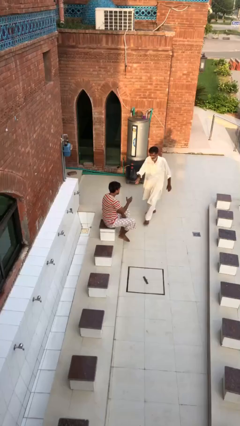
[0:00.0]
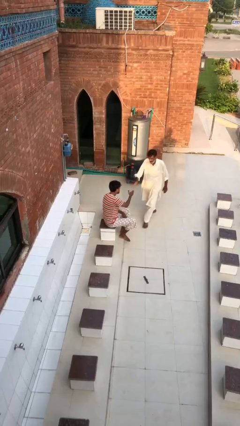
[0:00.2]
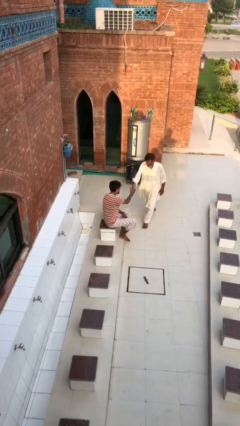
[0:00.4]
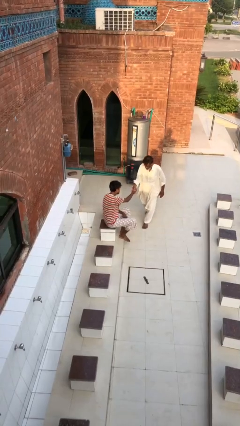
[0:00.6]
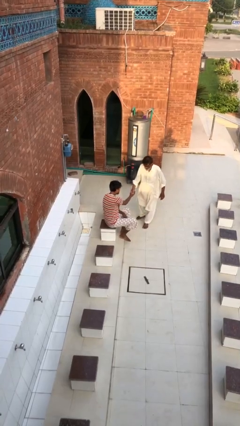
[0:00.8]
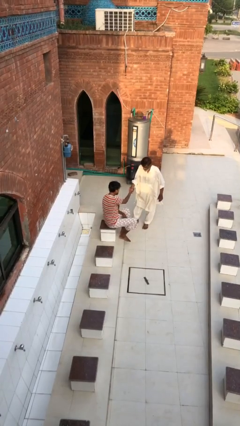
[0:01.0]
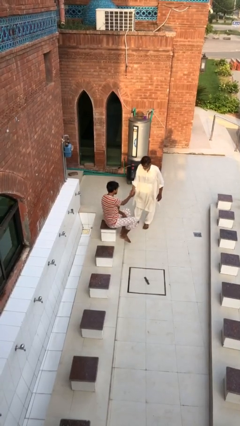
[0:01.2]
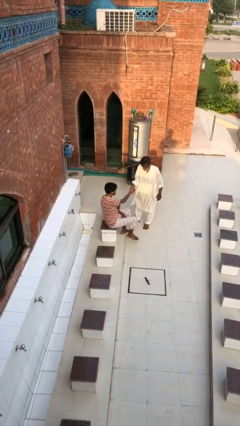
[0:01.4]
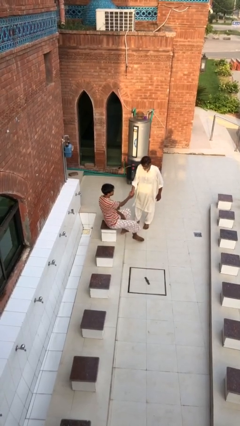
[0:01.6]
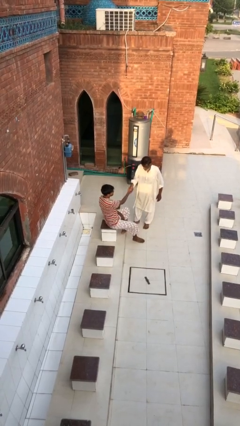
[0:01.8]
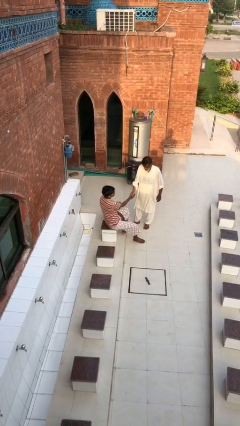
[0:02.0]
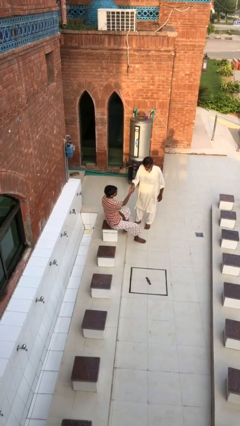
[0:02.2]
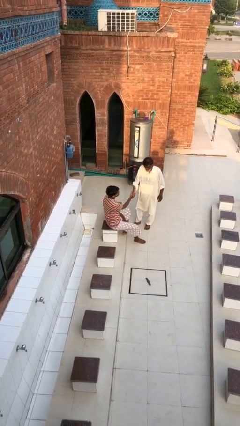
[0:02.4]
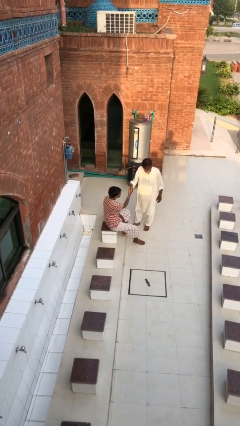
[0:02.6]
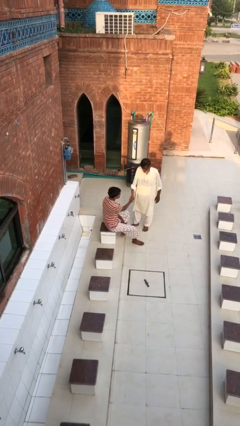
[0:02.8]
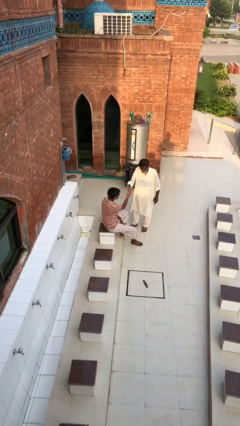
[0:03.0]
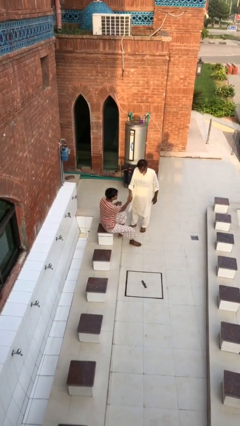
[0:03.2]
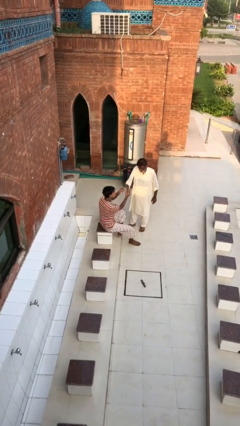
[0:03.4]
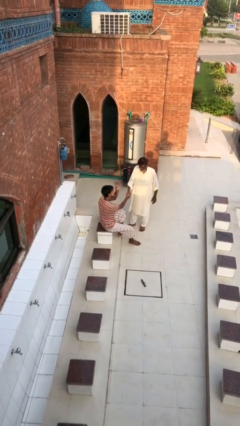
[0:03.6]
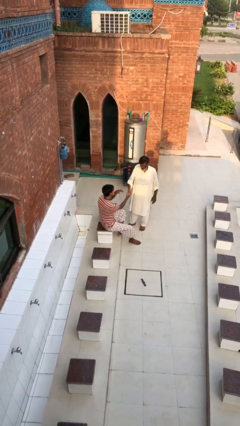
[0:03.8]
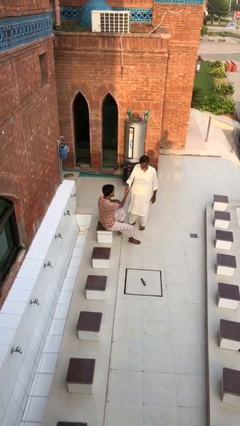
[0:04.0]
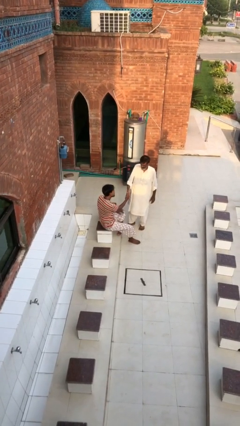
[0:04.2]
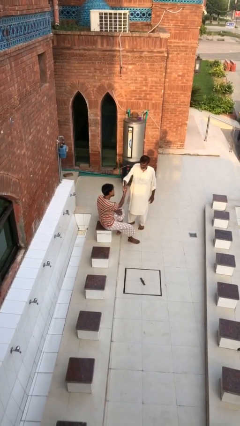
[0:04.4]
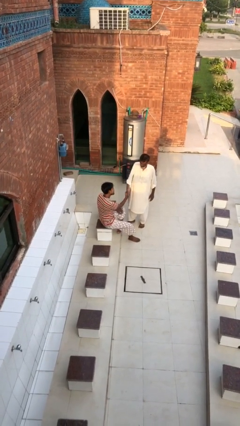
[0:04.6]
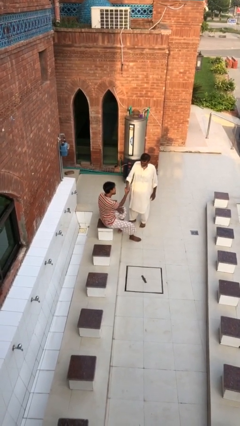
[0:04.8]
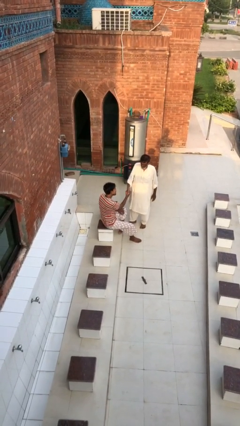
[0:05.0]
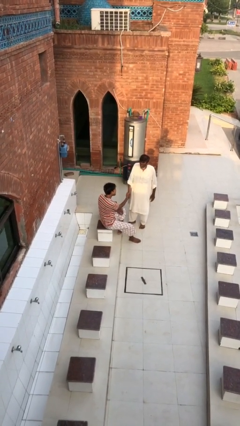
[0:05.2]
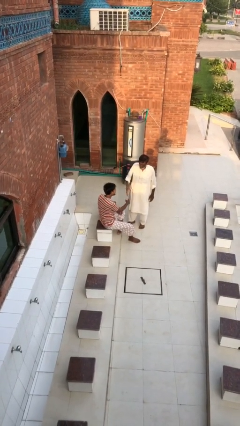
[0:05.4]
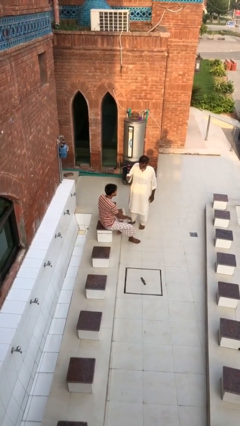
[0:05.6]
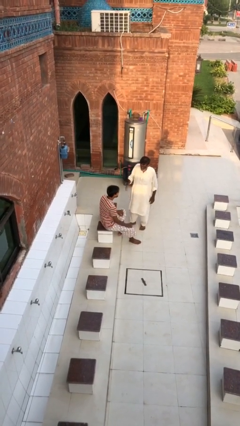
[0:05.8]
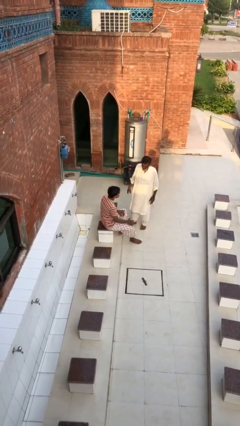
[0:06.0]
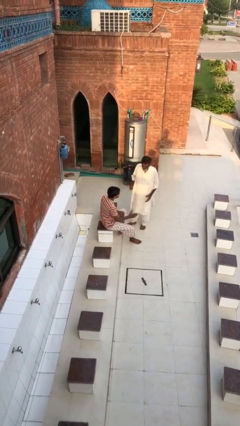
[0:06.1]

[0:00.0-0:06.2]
person shakes hand

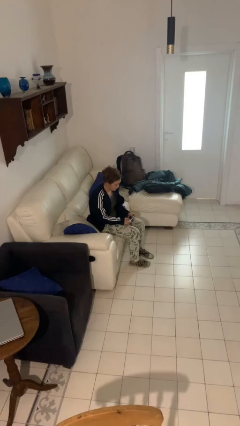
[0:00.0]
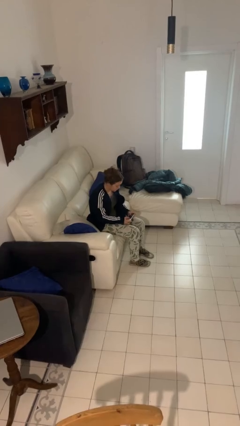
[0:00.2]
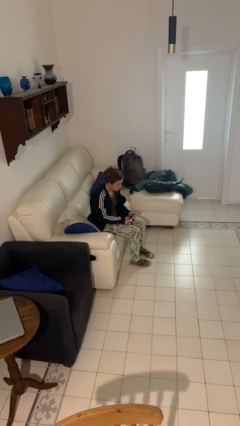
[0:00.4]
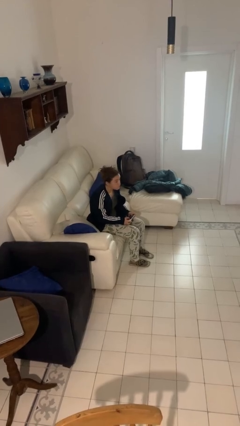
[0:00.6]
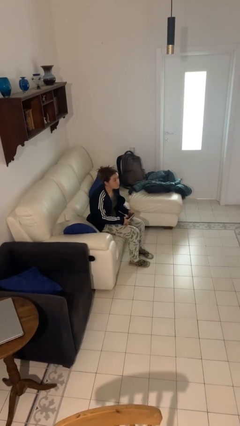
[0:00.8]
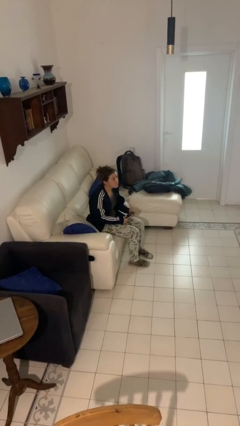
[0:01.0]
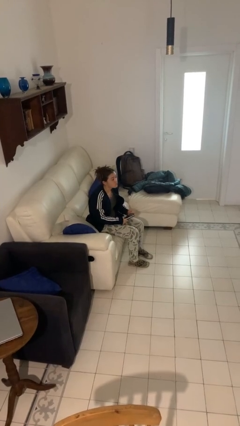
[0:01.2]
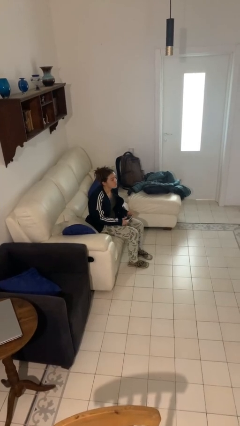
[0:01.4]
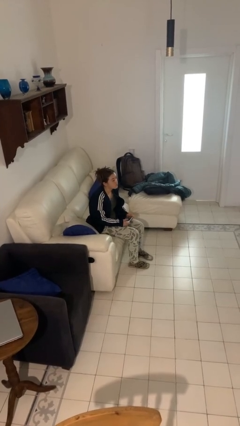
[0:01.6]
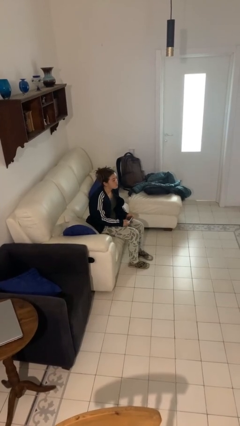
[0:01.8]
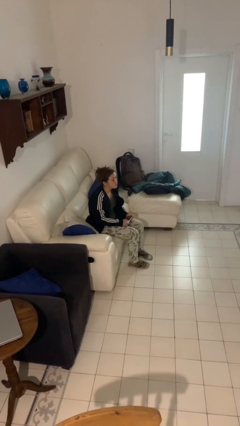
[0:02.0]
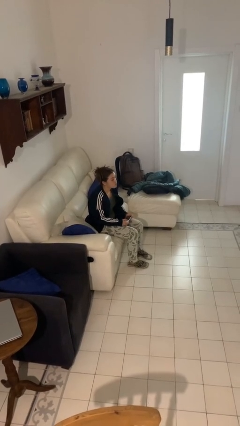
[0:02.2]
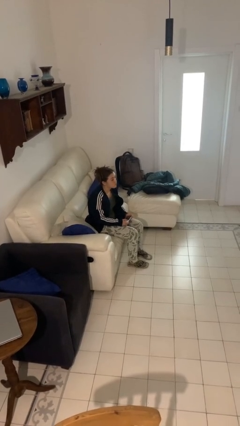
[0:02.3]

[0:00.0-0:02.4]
person interacts with handheld game

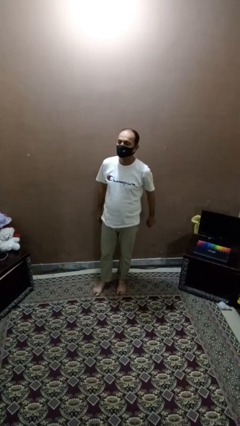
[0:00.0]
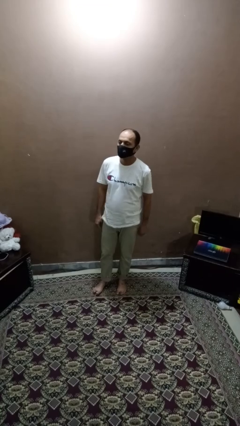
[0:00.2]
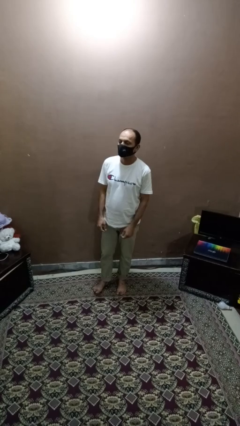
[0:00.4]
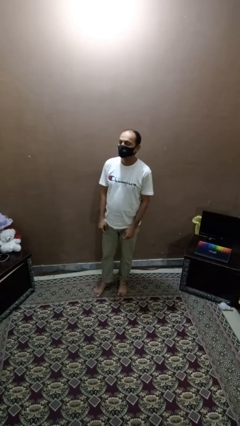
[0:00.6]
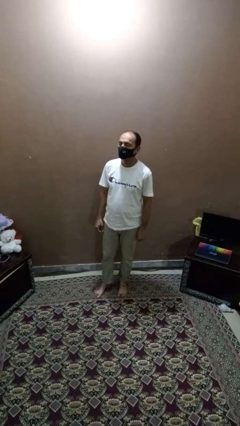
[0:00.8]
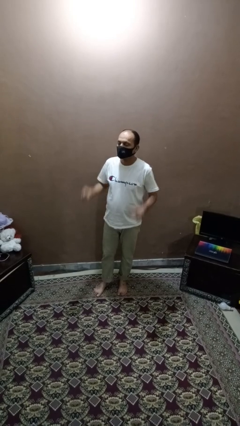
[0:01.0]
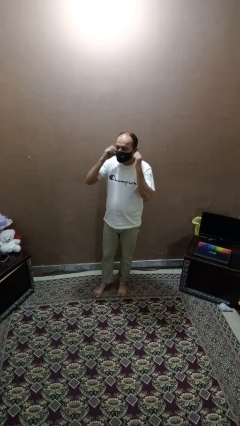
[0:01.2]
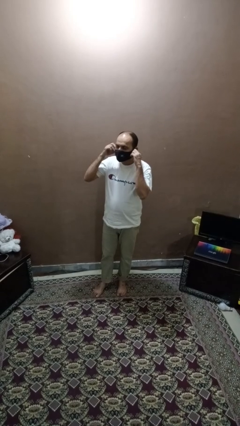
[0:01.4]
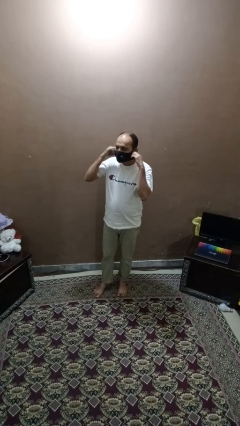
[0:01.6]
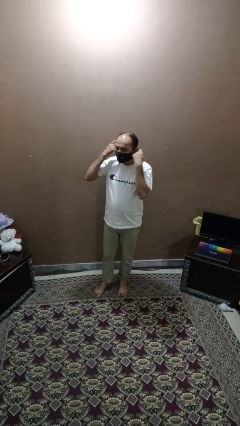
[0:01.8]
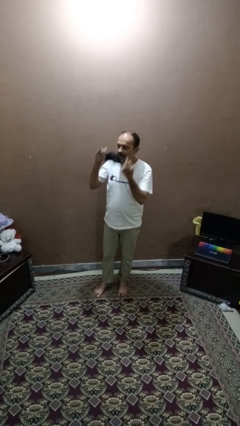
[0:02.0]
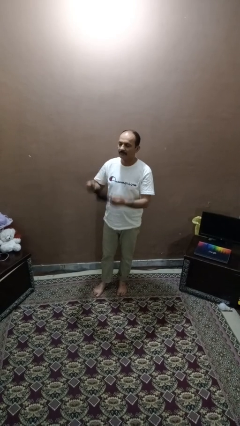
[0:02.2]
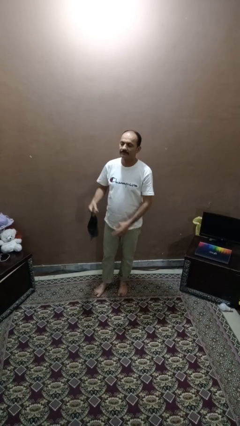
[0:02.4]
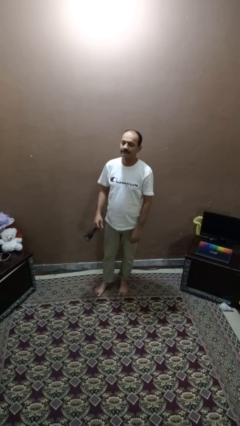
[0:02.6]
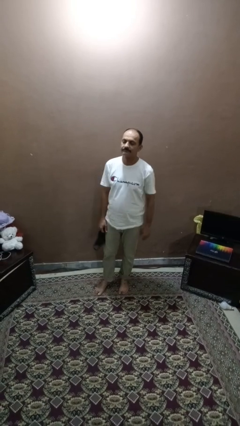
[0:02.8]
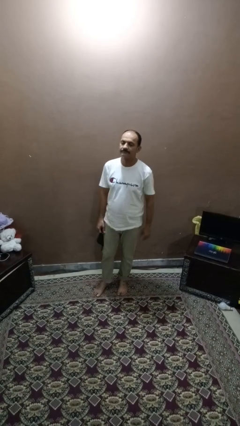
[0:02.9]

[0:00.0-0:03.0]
person takes off facemask

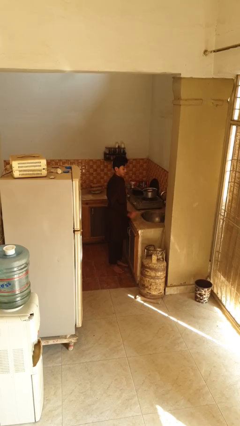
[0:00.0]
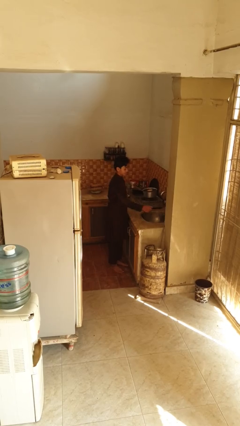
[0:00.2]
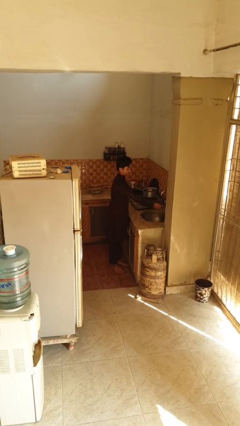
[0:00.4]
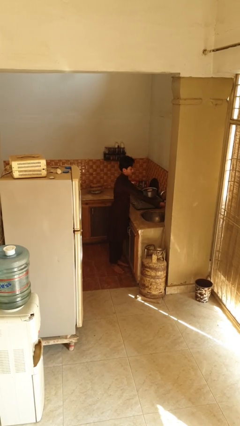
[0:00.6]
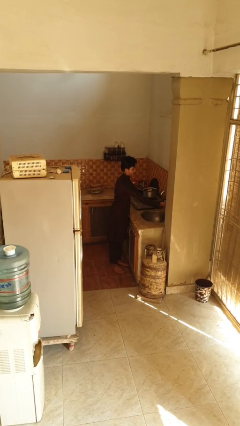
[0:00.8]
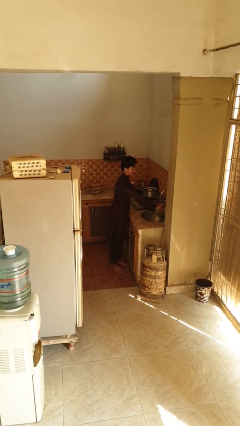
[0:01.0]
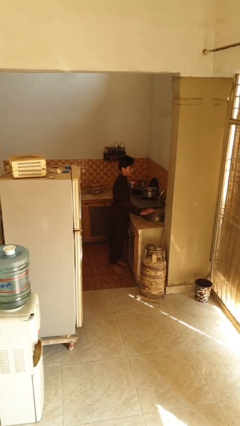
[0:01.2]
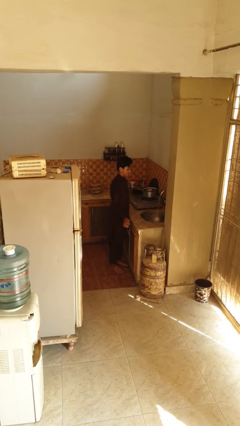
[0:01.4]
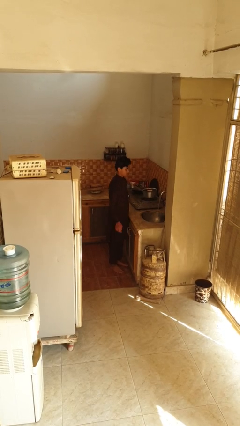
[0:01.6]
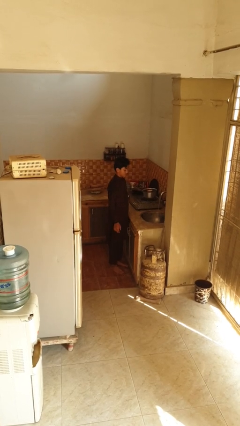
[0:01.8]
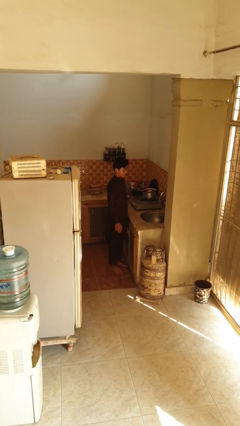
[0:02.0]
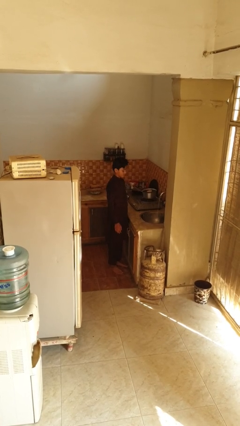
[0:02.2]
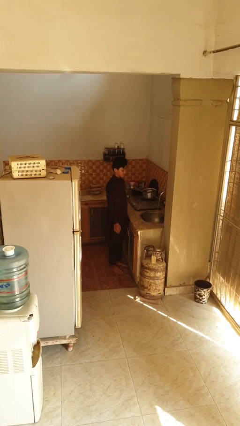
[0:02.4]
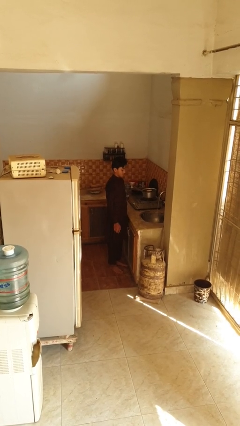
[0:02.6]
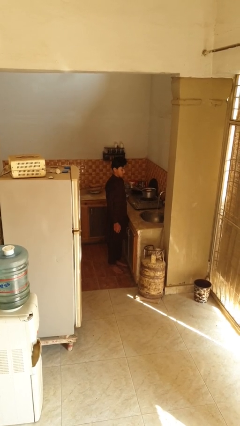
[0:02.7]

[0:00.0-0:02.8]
person turns on faucet

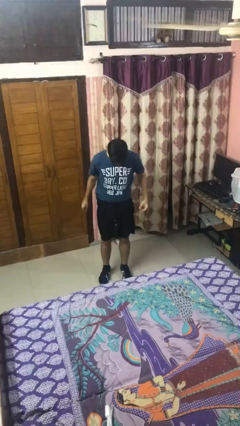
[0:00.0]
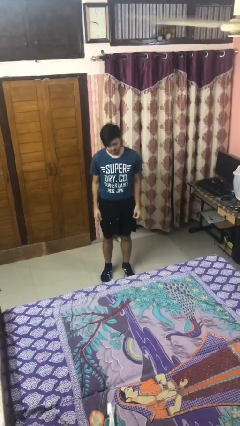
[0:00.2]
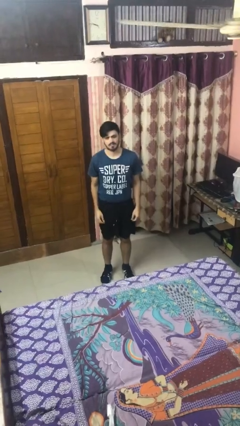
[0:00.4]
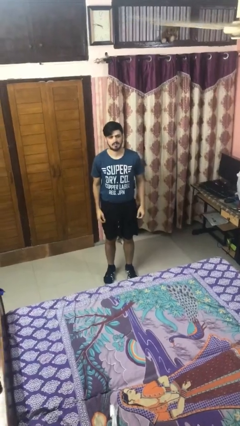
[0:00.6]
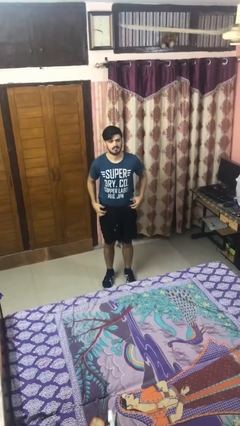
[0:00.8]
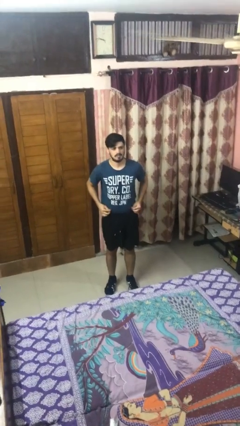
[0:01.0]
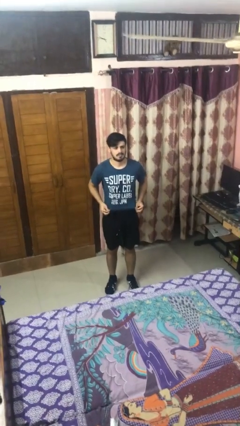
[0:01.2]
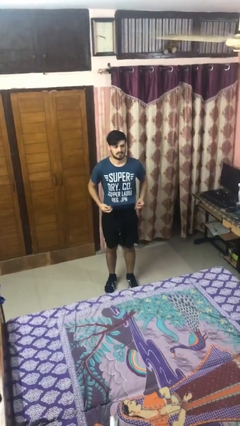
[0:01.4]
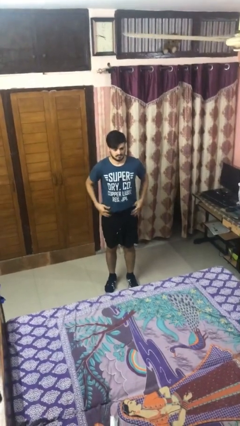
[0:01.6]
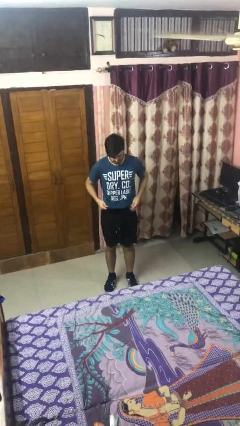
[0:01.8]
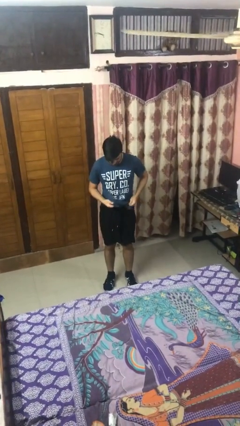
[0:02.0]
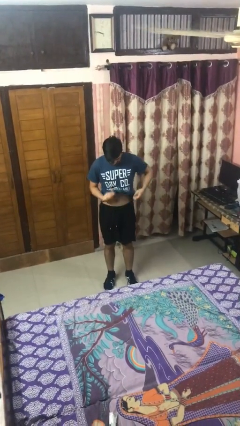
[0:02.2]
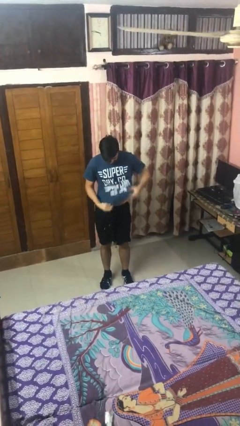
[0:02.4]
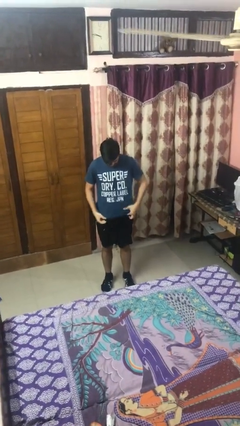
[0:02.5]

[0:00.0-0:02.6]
person untucks shirt

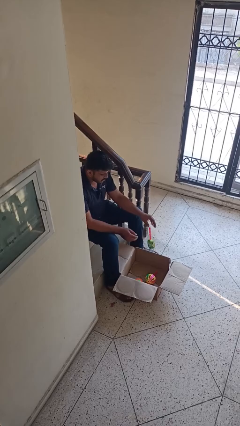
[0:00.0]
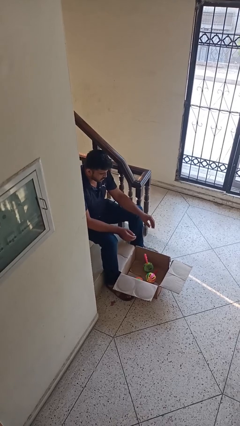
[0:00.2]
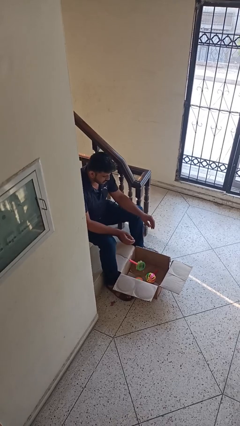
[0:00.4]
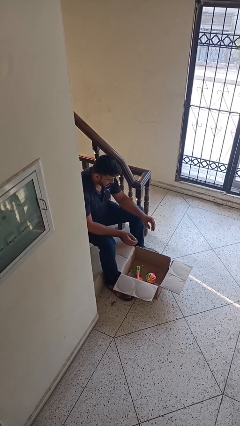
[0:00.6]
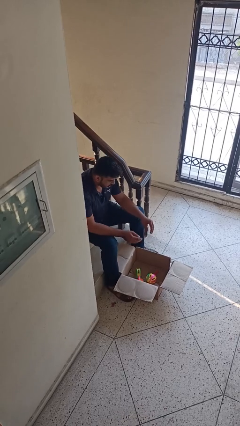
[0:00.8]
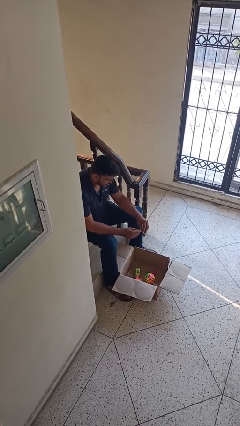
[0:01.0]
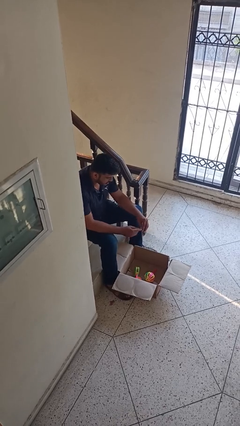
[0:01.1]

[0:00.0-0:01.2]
person puts object into box
